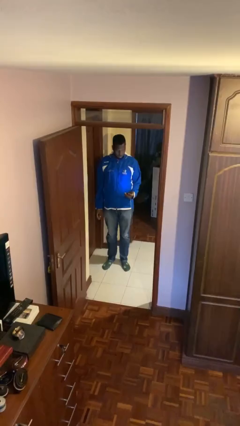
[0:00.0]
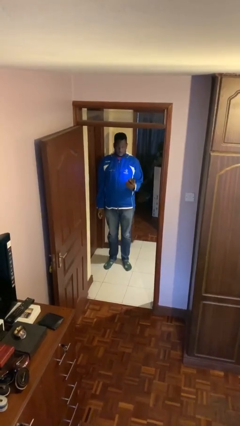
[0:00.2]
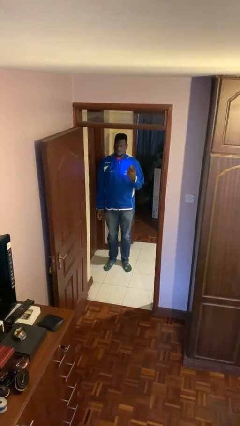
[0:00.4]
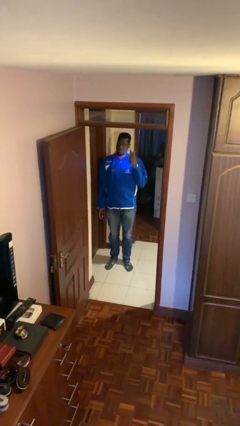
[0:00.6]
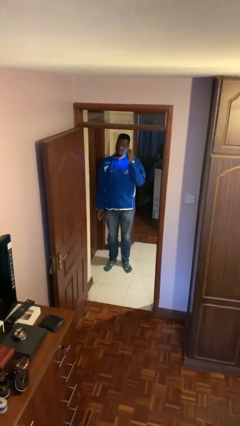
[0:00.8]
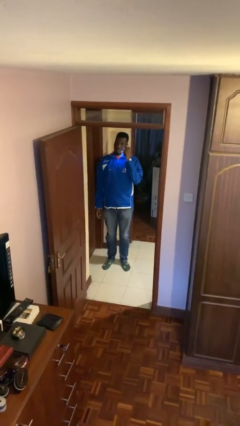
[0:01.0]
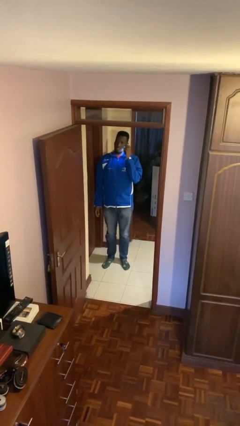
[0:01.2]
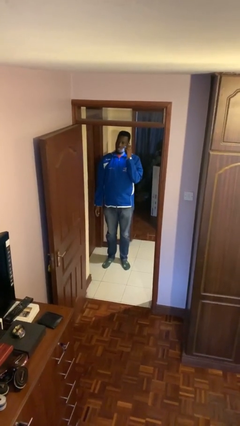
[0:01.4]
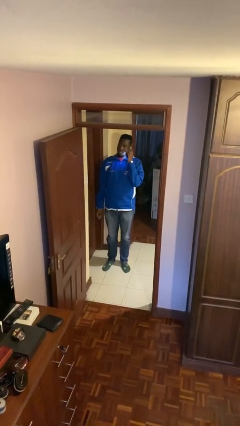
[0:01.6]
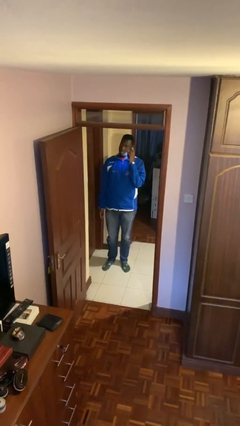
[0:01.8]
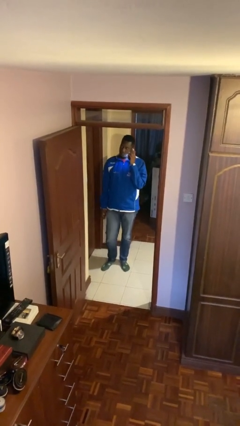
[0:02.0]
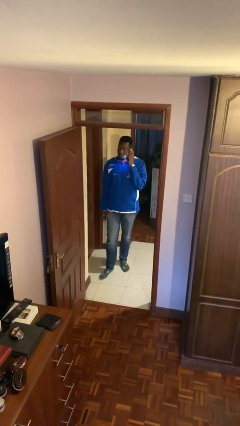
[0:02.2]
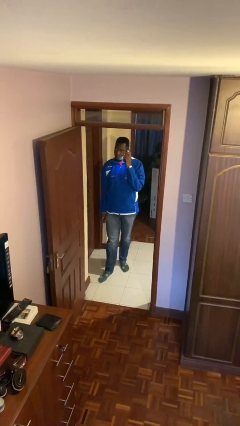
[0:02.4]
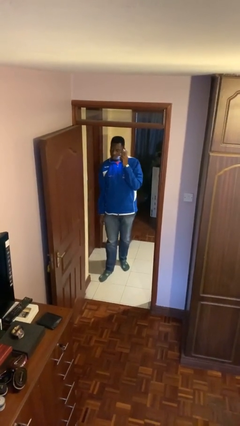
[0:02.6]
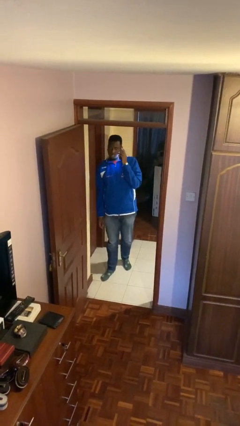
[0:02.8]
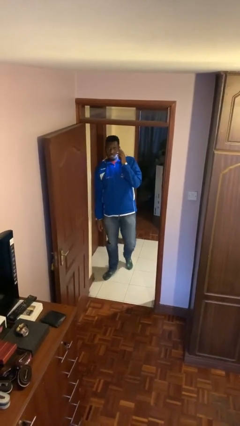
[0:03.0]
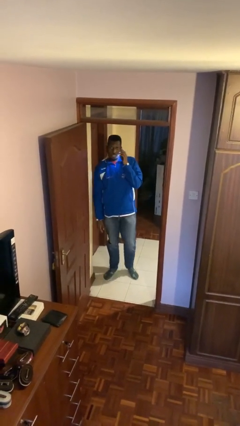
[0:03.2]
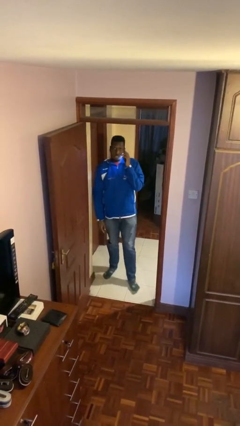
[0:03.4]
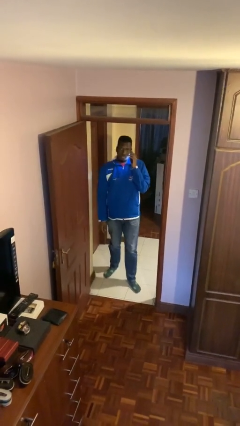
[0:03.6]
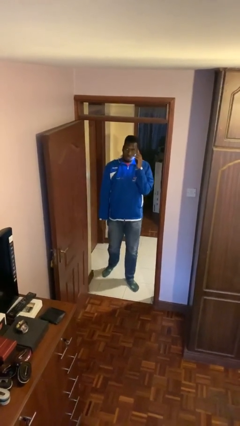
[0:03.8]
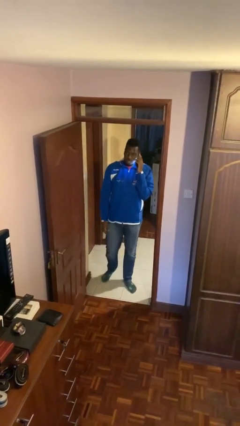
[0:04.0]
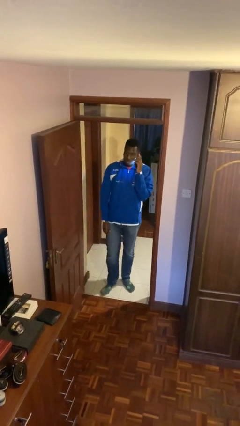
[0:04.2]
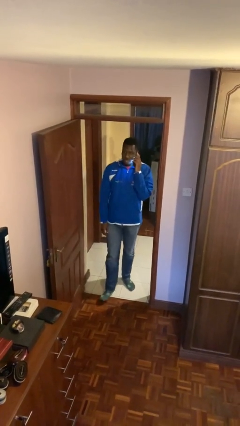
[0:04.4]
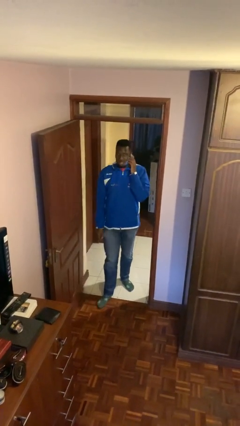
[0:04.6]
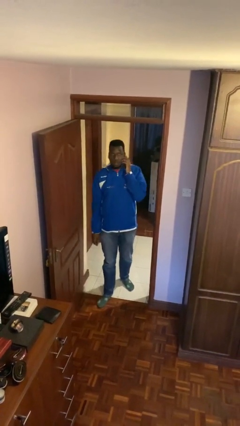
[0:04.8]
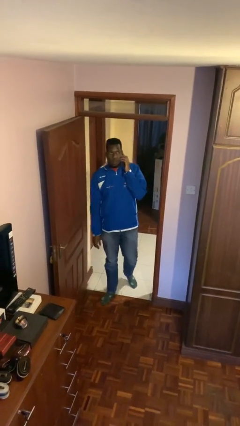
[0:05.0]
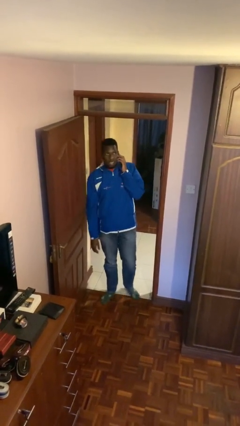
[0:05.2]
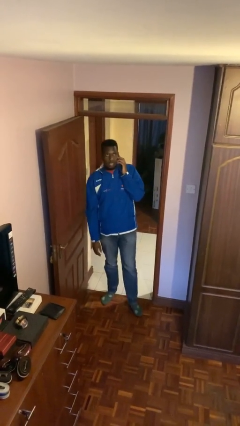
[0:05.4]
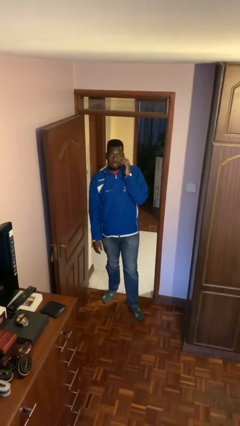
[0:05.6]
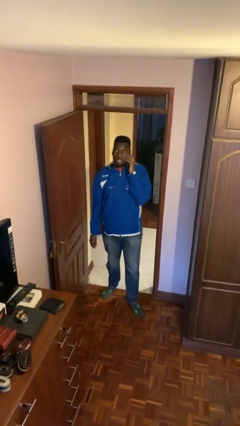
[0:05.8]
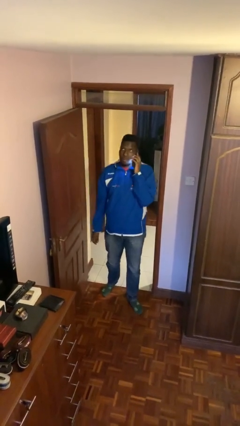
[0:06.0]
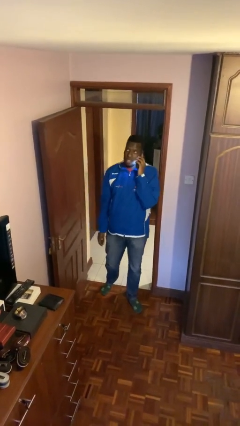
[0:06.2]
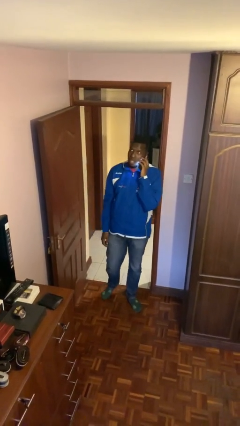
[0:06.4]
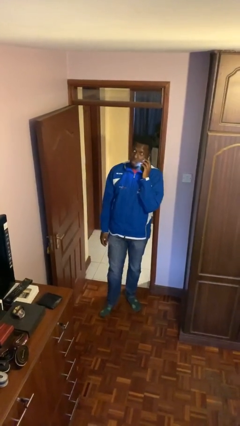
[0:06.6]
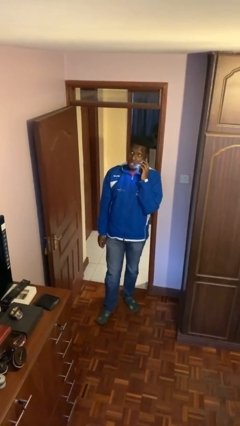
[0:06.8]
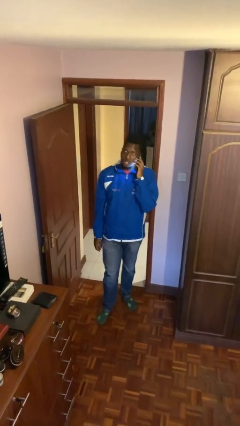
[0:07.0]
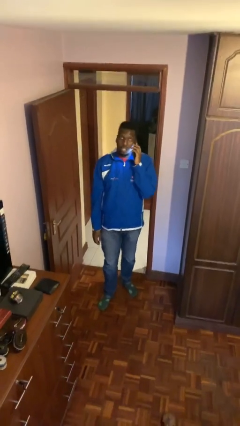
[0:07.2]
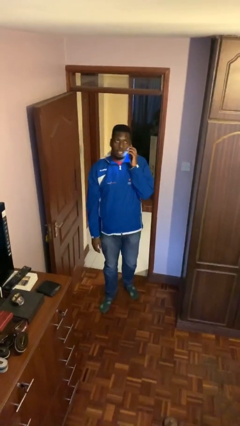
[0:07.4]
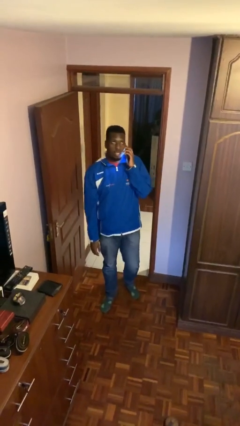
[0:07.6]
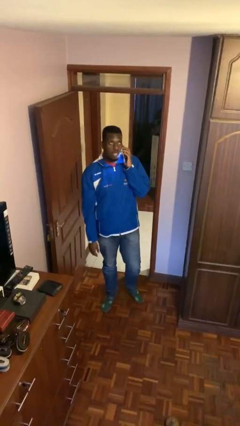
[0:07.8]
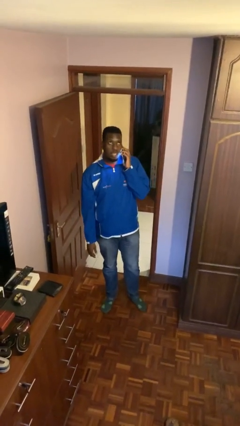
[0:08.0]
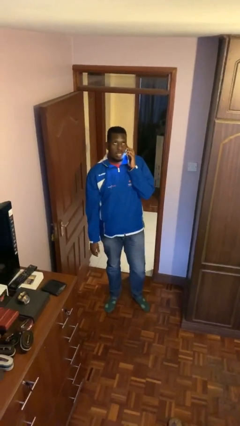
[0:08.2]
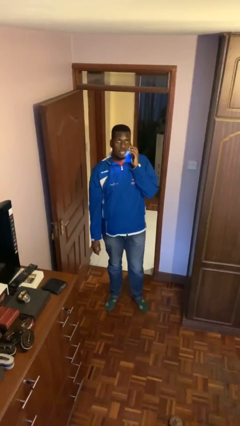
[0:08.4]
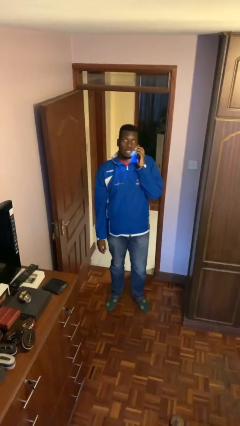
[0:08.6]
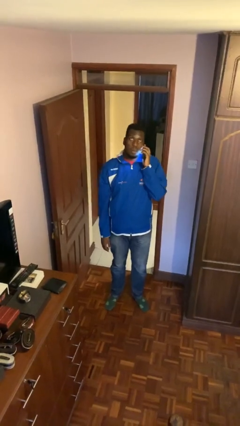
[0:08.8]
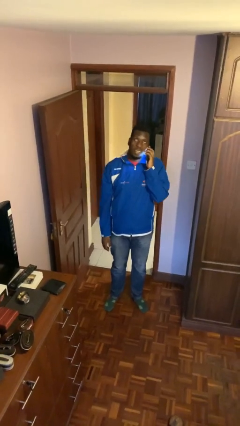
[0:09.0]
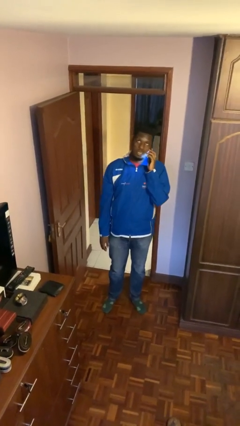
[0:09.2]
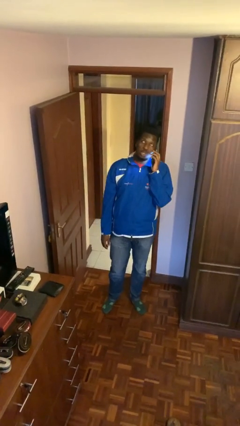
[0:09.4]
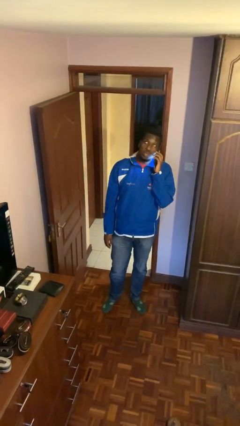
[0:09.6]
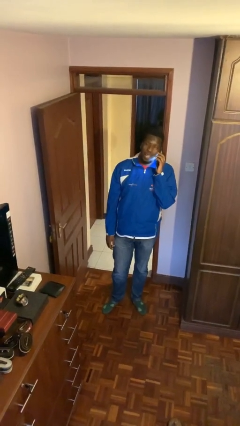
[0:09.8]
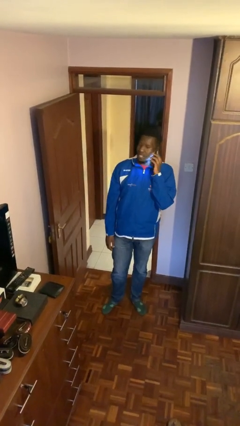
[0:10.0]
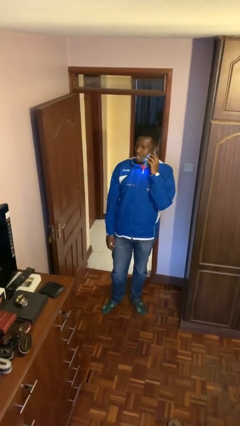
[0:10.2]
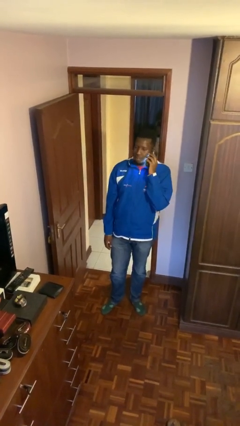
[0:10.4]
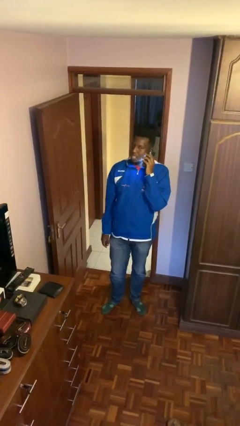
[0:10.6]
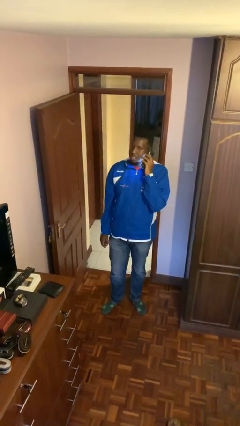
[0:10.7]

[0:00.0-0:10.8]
person enters scene through structure

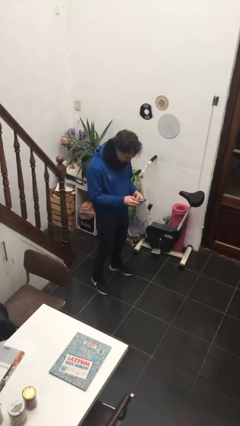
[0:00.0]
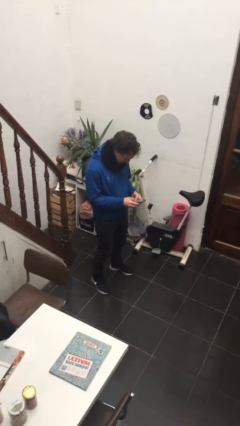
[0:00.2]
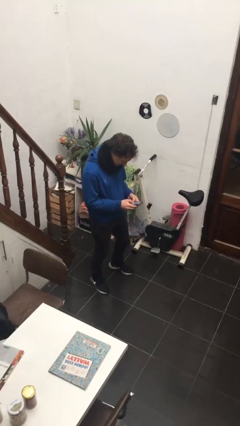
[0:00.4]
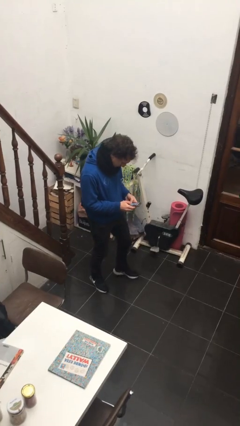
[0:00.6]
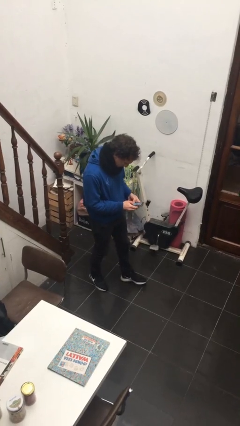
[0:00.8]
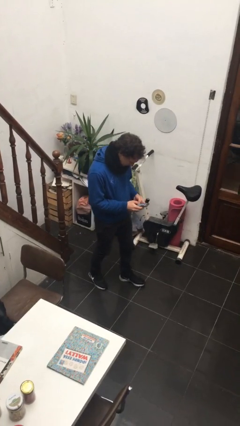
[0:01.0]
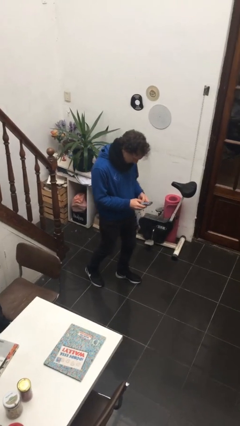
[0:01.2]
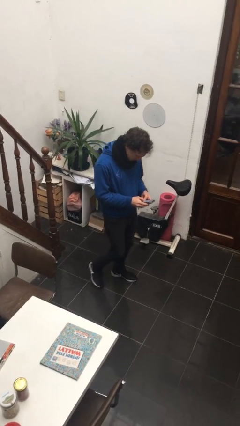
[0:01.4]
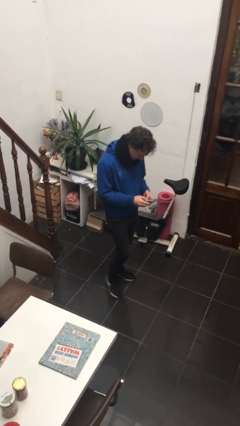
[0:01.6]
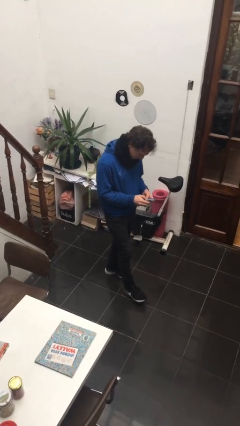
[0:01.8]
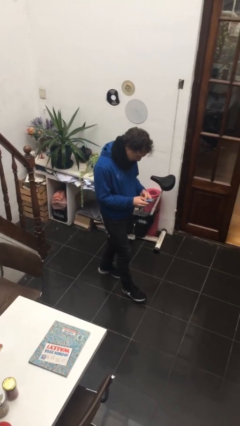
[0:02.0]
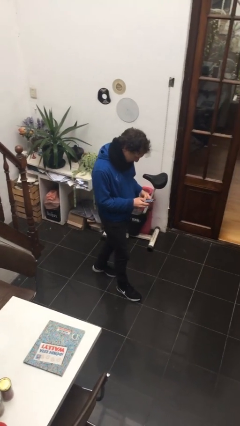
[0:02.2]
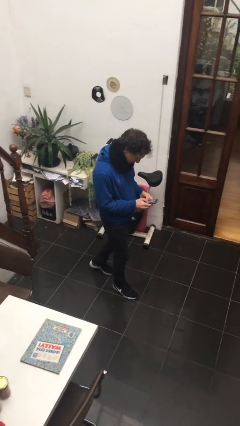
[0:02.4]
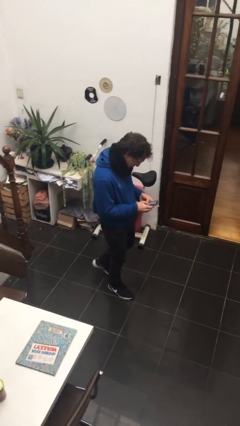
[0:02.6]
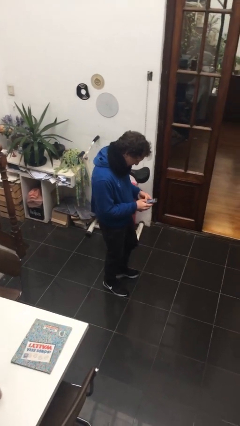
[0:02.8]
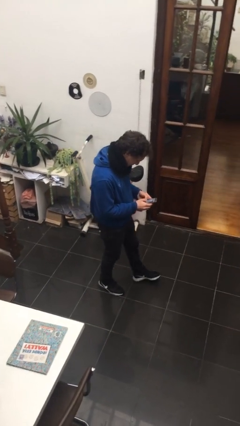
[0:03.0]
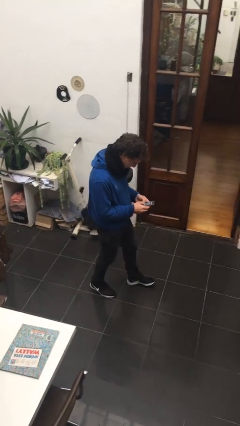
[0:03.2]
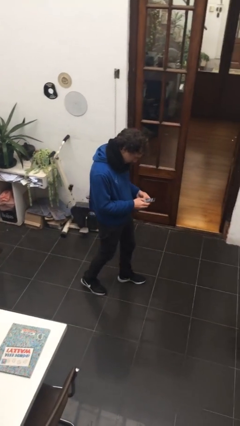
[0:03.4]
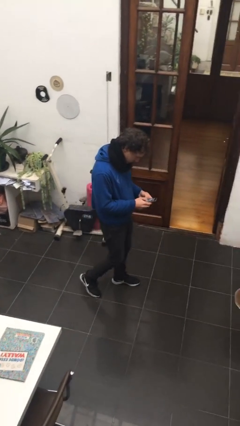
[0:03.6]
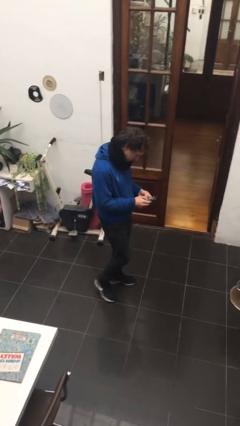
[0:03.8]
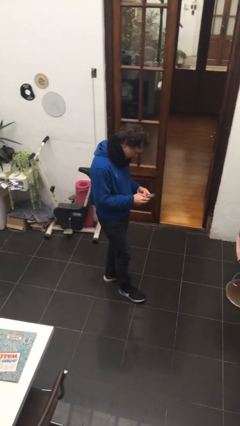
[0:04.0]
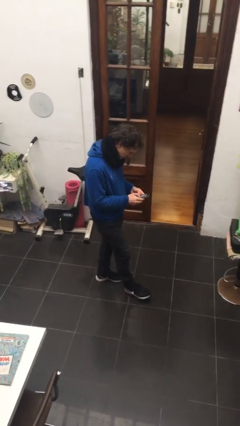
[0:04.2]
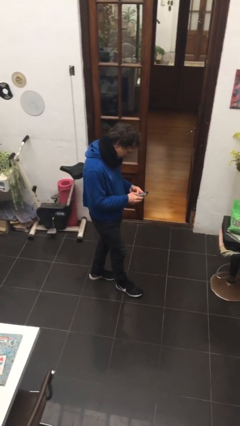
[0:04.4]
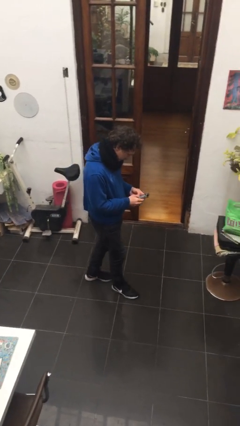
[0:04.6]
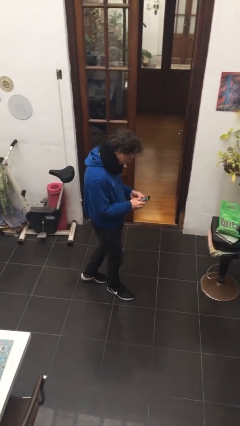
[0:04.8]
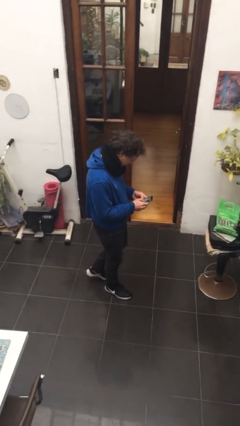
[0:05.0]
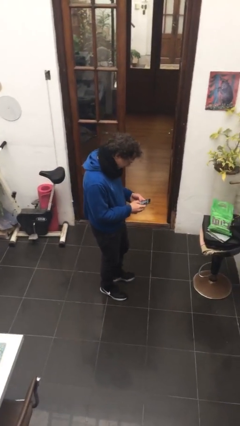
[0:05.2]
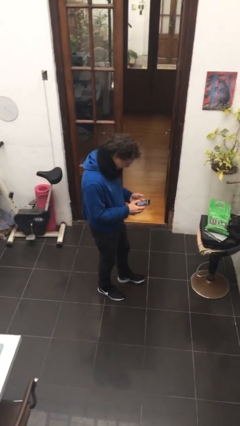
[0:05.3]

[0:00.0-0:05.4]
person texts on phone

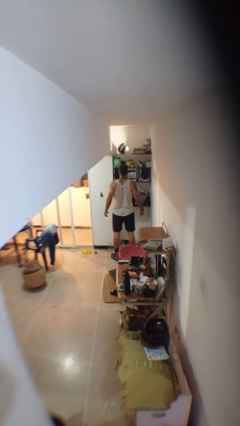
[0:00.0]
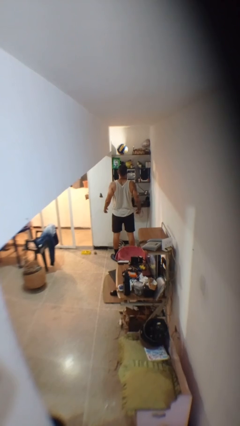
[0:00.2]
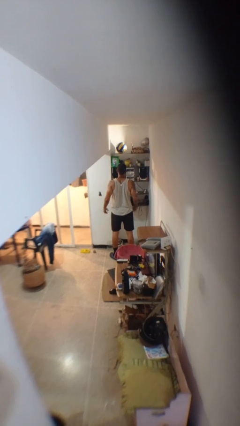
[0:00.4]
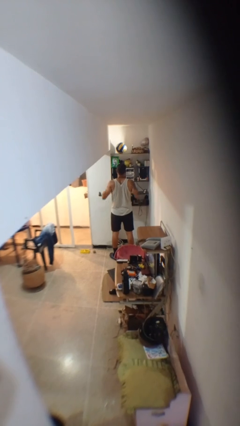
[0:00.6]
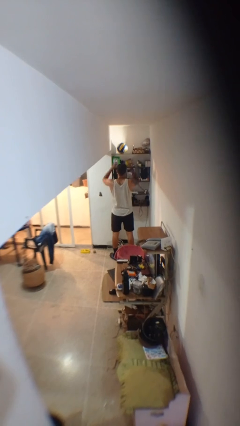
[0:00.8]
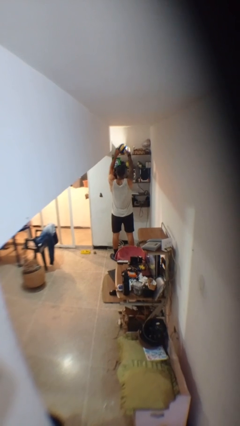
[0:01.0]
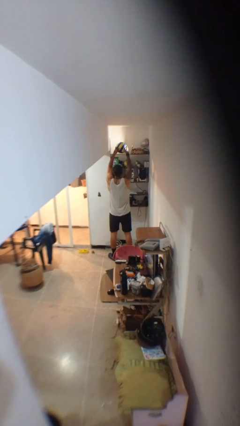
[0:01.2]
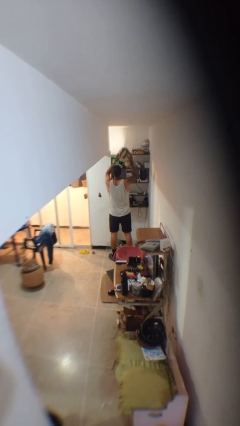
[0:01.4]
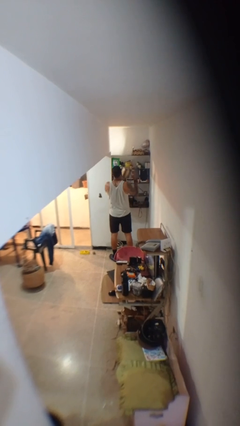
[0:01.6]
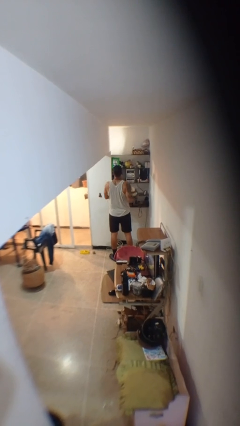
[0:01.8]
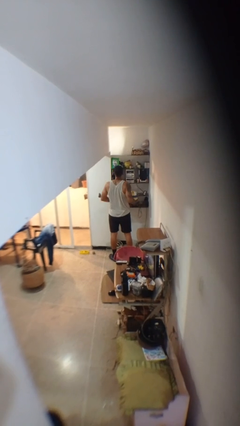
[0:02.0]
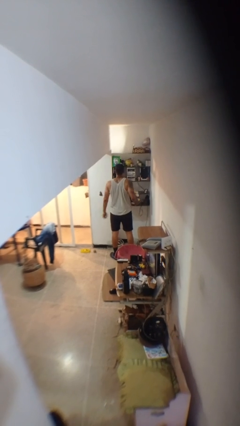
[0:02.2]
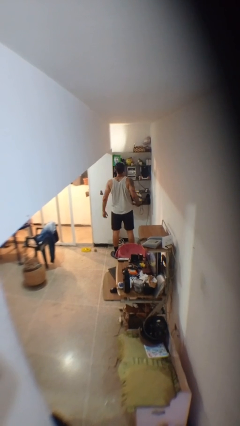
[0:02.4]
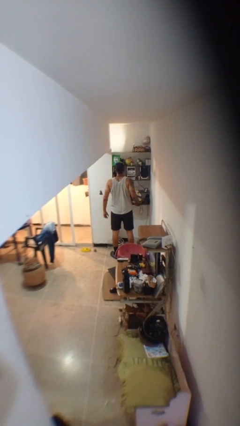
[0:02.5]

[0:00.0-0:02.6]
person picks up object from shelf
